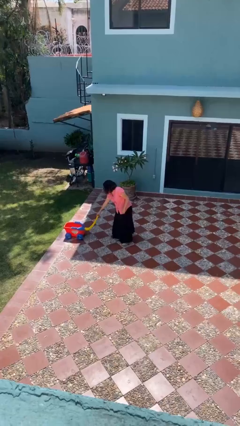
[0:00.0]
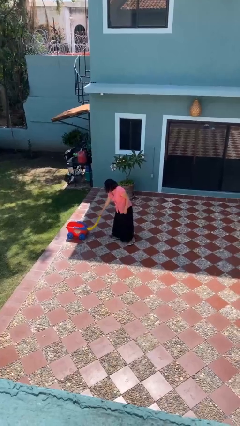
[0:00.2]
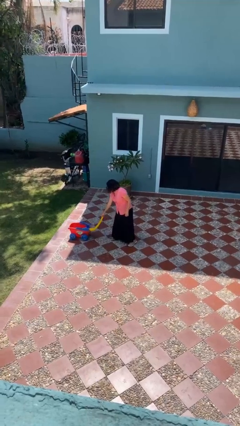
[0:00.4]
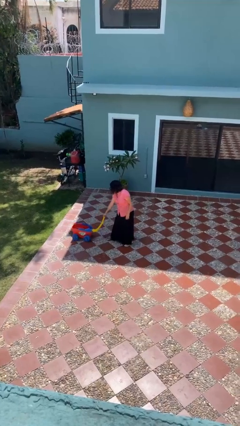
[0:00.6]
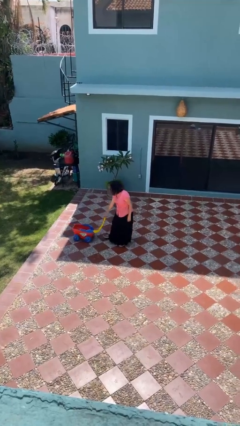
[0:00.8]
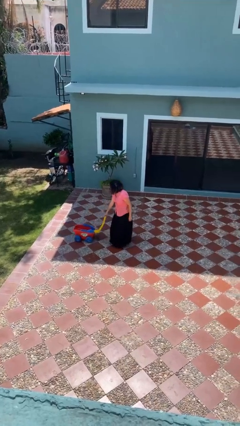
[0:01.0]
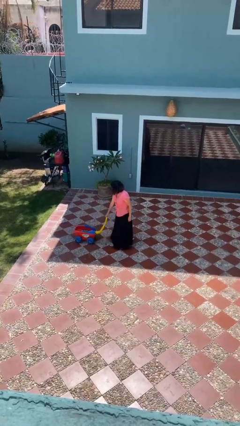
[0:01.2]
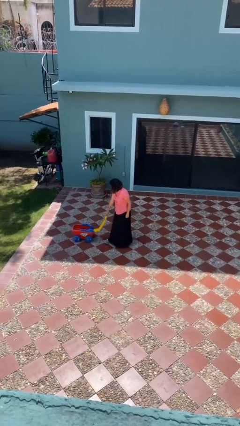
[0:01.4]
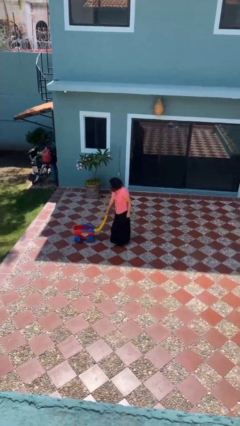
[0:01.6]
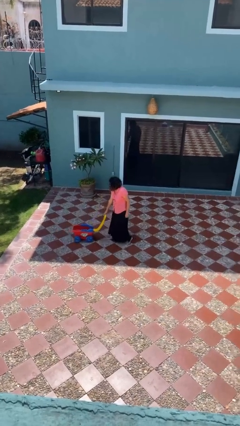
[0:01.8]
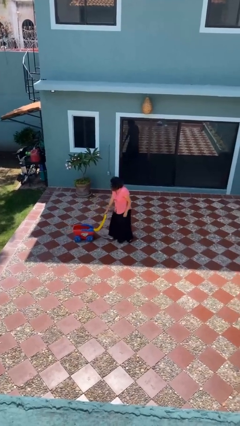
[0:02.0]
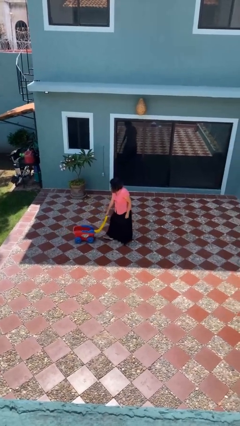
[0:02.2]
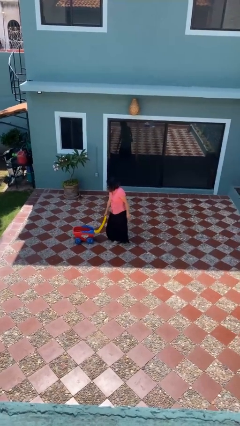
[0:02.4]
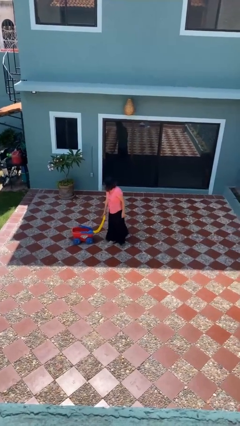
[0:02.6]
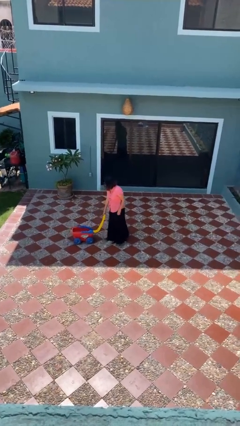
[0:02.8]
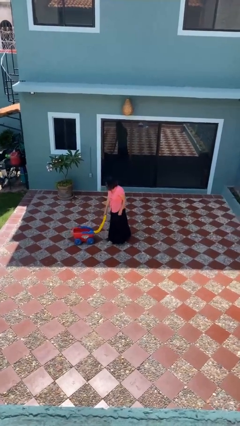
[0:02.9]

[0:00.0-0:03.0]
person pulls wheeled cart

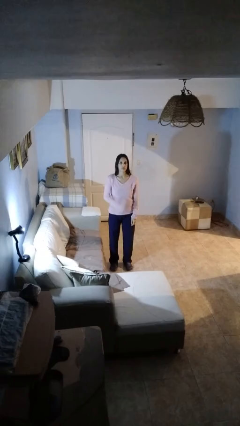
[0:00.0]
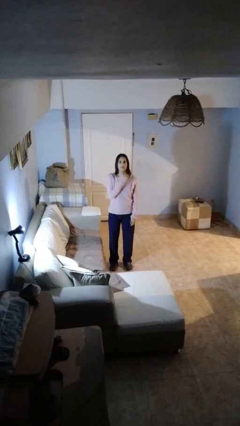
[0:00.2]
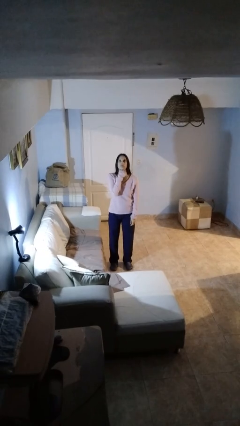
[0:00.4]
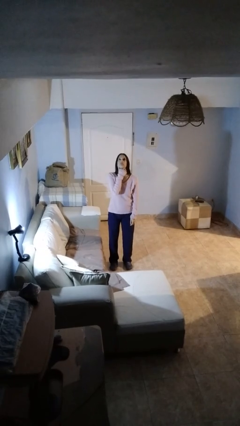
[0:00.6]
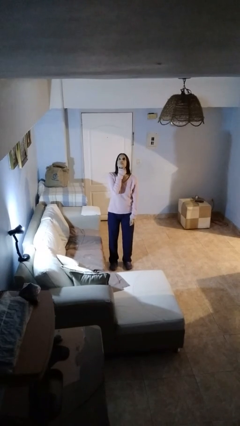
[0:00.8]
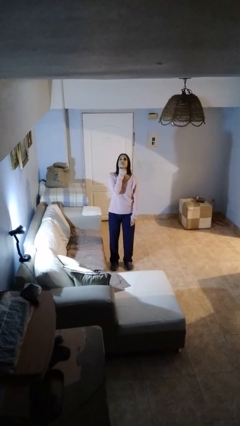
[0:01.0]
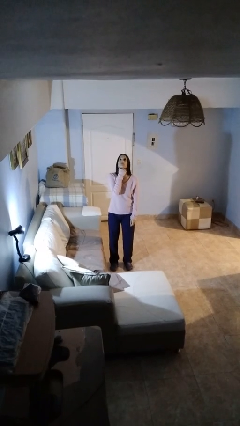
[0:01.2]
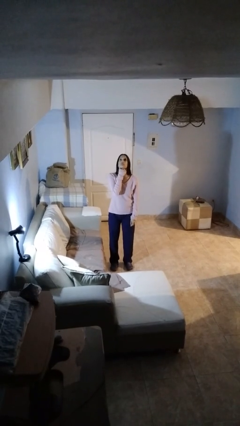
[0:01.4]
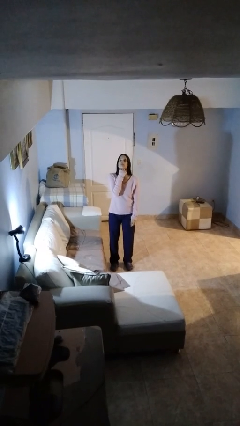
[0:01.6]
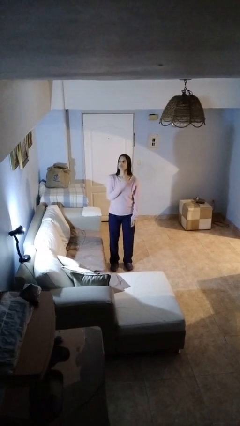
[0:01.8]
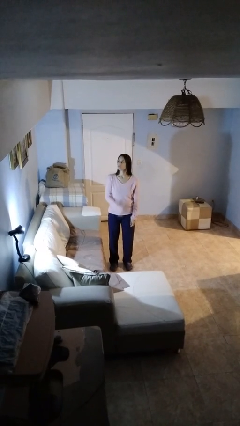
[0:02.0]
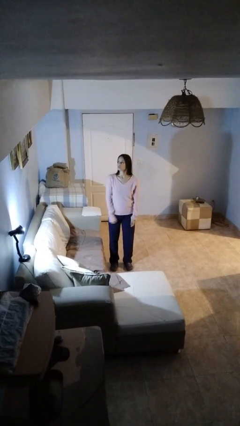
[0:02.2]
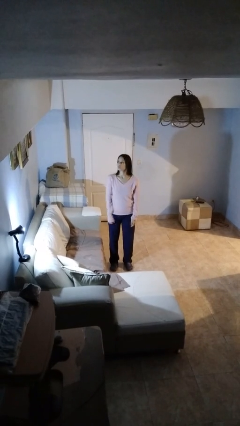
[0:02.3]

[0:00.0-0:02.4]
person strokes chin

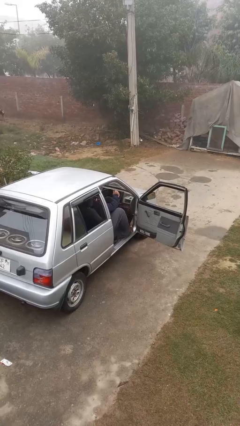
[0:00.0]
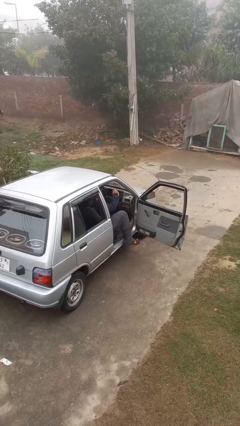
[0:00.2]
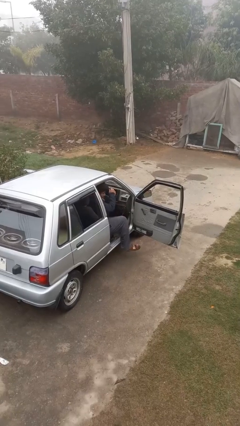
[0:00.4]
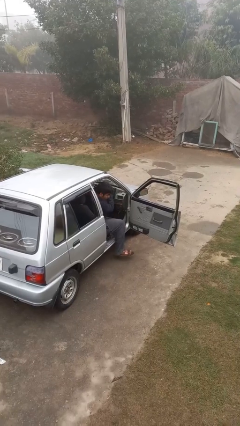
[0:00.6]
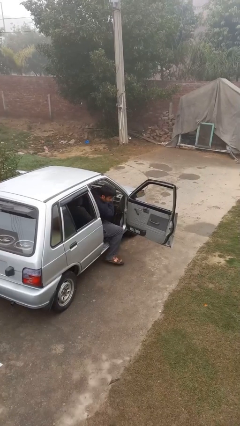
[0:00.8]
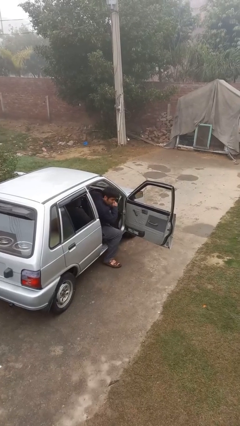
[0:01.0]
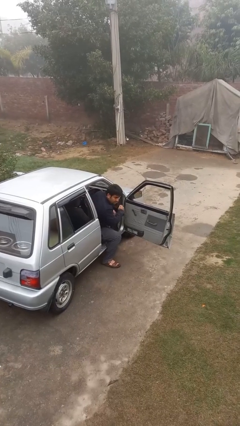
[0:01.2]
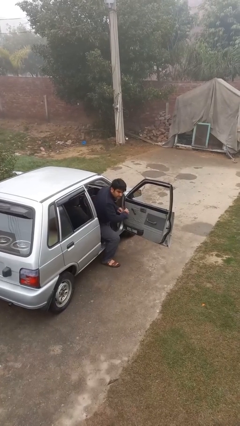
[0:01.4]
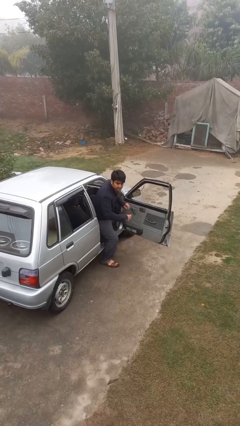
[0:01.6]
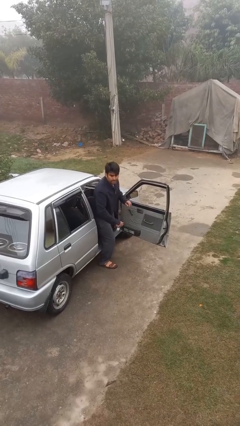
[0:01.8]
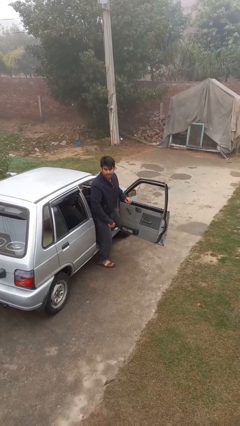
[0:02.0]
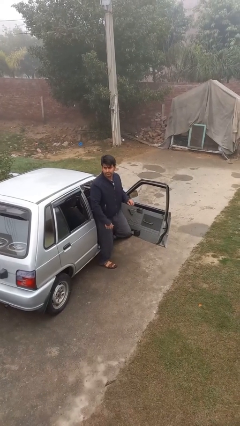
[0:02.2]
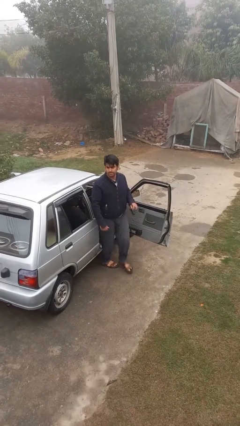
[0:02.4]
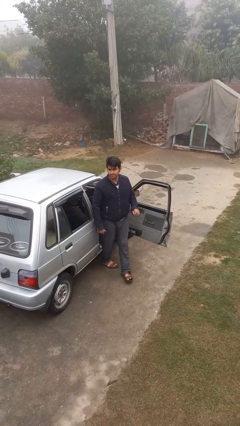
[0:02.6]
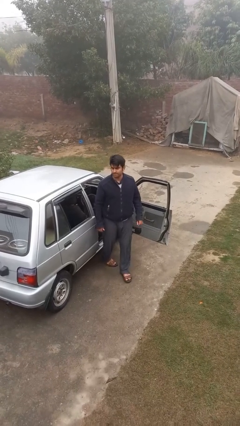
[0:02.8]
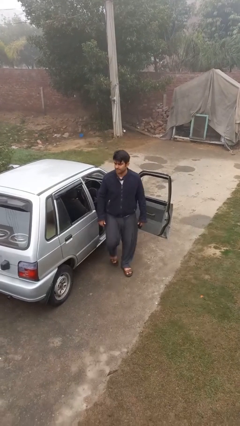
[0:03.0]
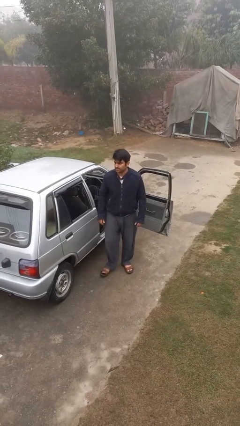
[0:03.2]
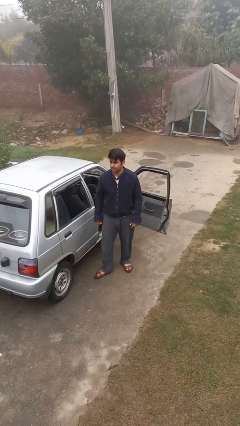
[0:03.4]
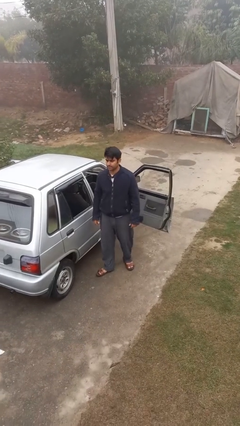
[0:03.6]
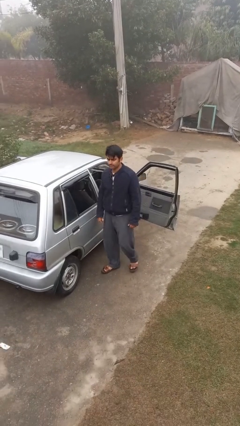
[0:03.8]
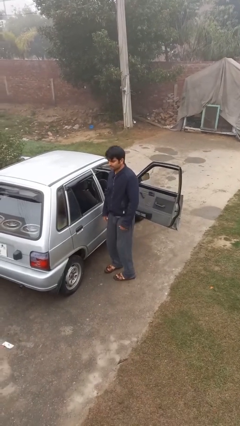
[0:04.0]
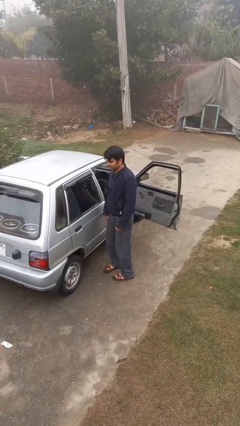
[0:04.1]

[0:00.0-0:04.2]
person exits car

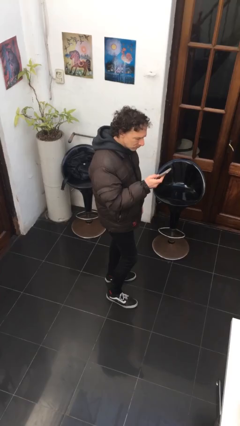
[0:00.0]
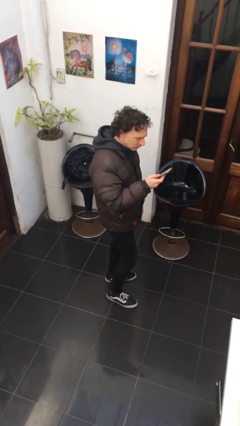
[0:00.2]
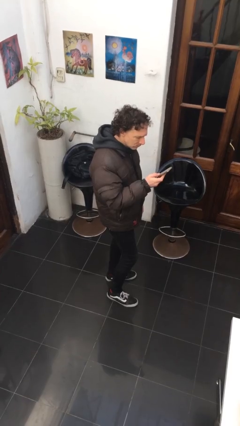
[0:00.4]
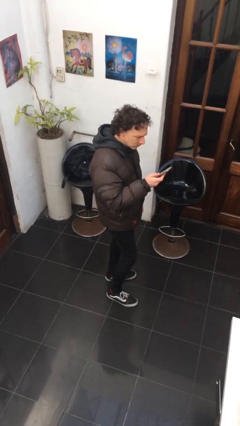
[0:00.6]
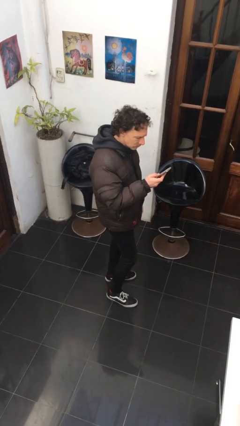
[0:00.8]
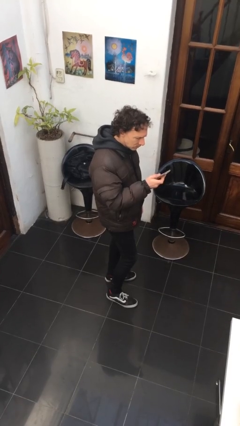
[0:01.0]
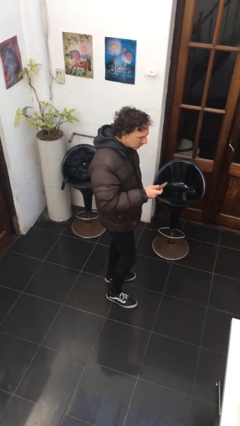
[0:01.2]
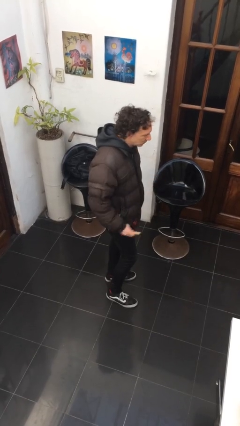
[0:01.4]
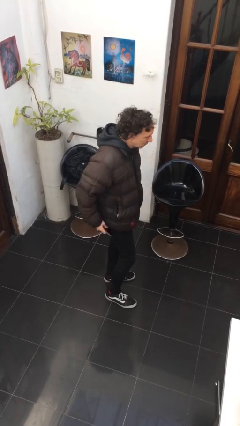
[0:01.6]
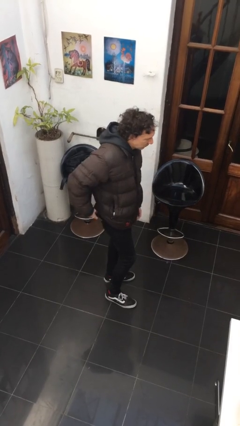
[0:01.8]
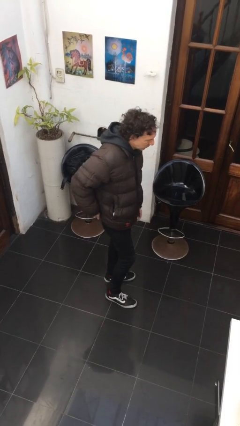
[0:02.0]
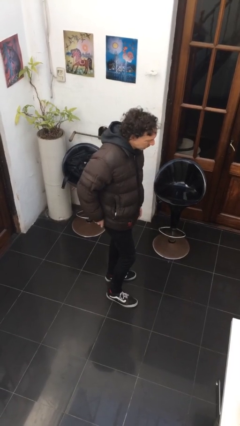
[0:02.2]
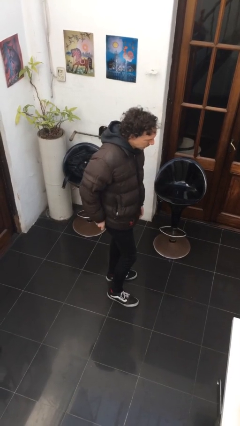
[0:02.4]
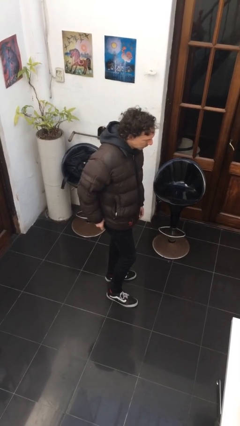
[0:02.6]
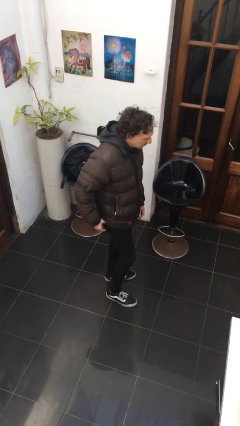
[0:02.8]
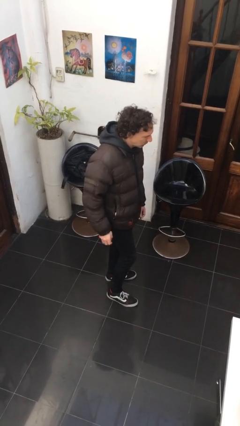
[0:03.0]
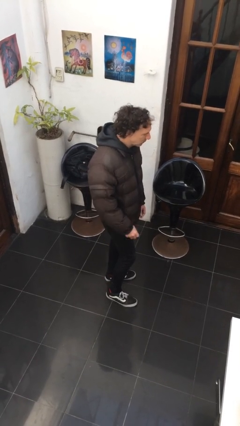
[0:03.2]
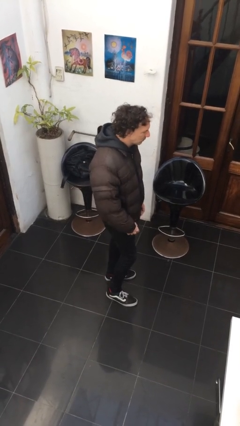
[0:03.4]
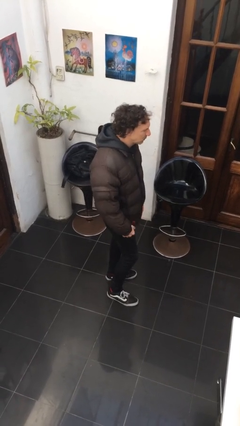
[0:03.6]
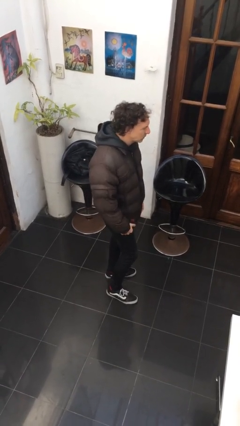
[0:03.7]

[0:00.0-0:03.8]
person puts phone into pocket

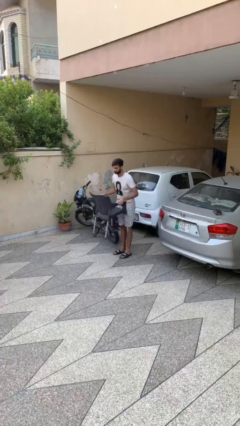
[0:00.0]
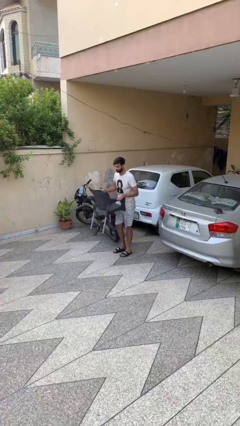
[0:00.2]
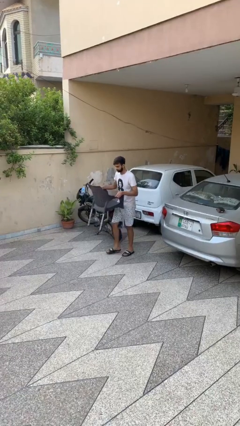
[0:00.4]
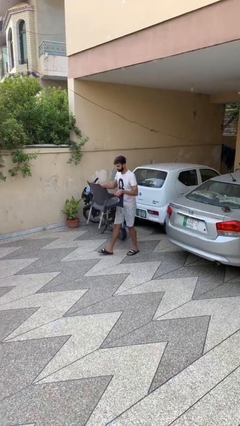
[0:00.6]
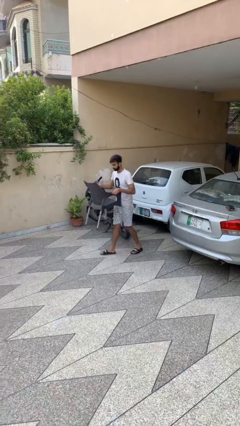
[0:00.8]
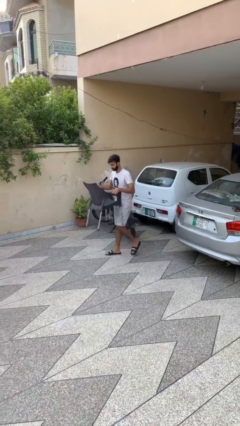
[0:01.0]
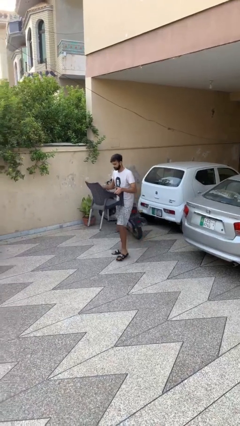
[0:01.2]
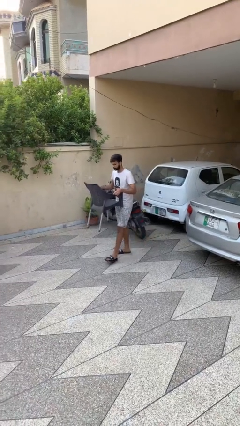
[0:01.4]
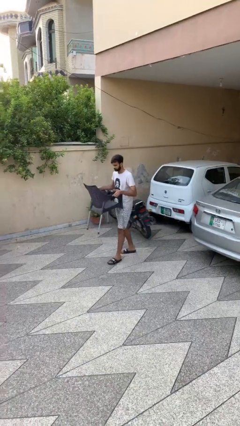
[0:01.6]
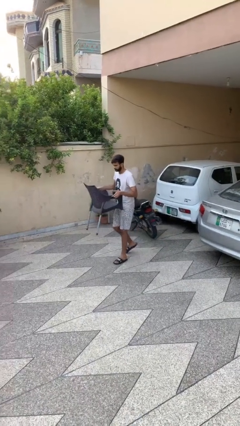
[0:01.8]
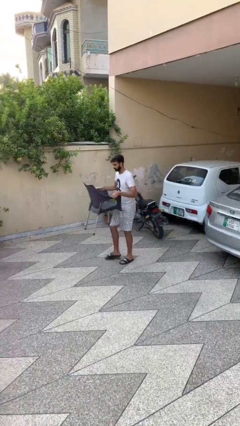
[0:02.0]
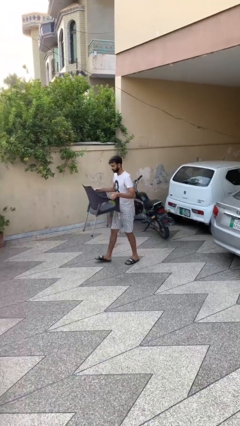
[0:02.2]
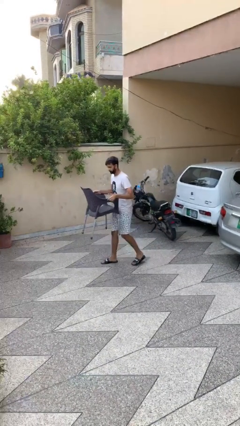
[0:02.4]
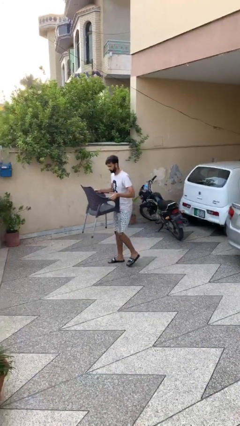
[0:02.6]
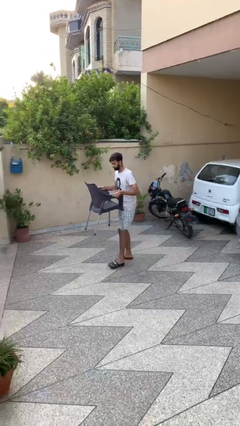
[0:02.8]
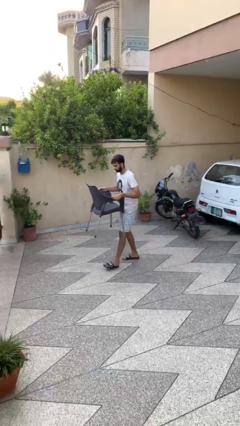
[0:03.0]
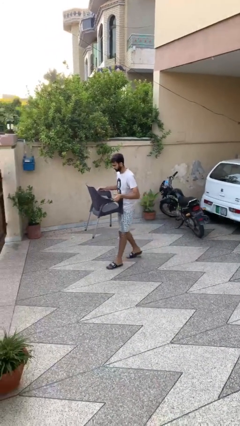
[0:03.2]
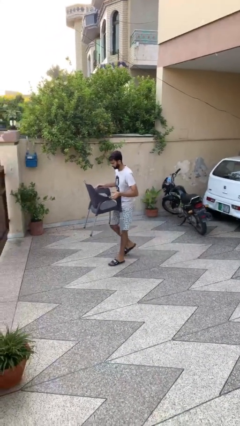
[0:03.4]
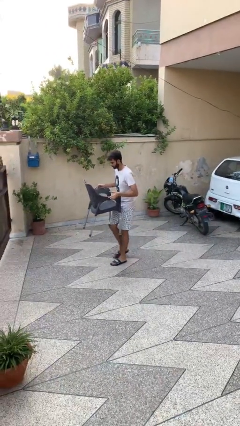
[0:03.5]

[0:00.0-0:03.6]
person carries heavy object

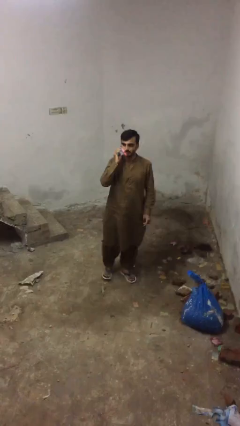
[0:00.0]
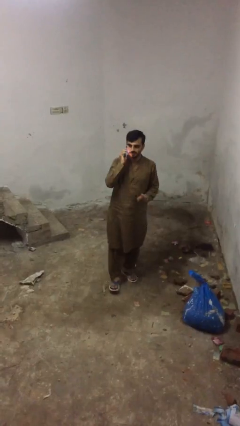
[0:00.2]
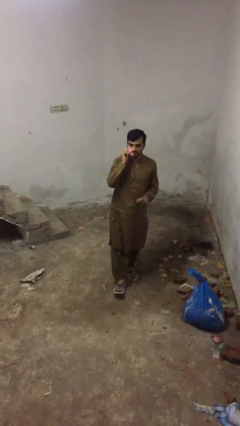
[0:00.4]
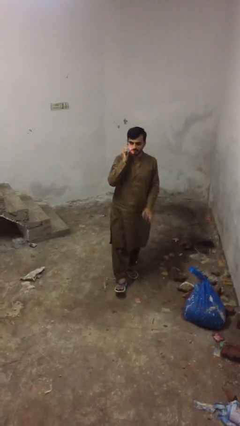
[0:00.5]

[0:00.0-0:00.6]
person talks on phone
